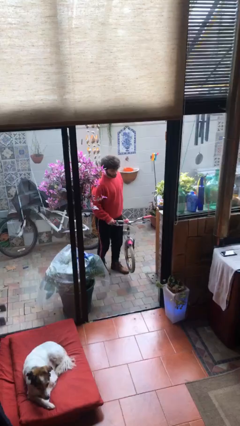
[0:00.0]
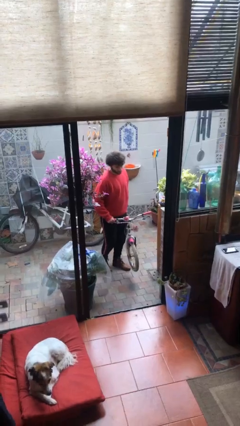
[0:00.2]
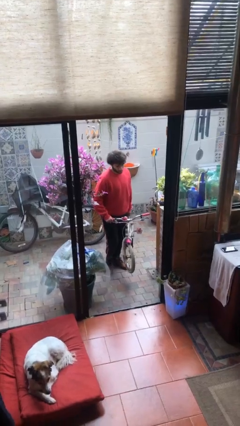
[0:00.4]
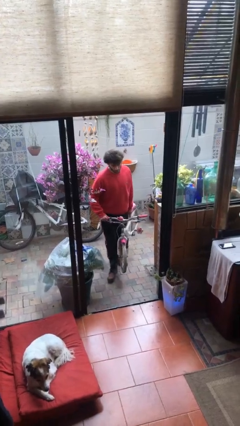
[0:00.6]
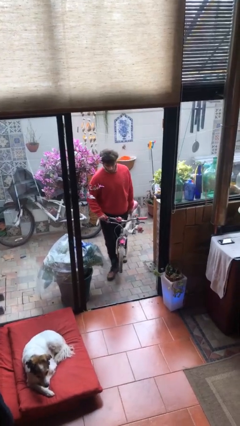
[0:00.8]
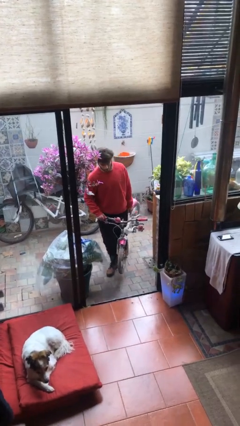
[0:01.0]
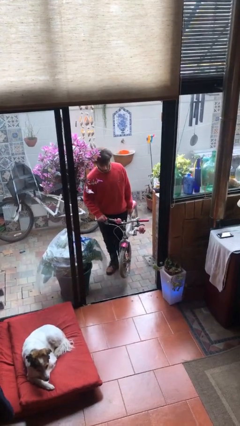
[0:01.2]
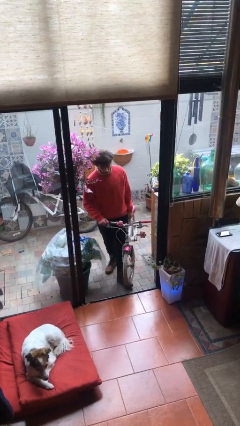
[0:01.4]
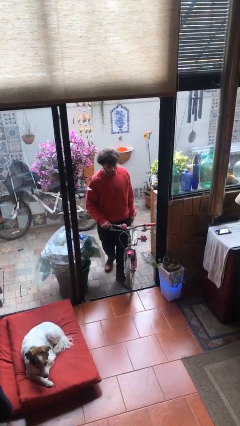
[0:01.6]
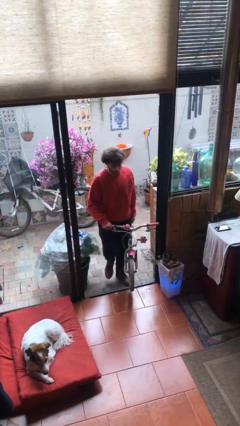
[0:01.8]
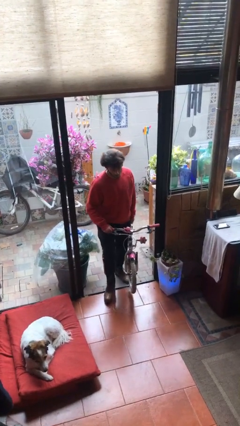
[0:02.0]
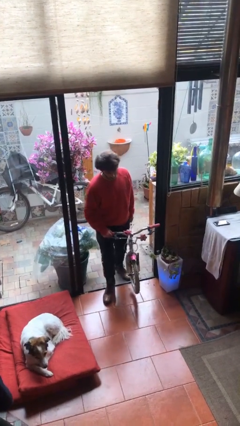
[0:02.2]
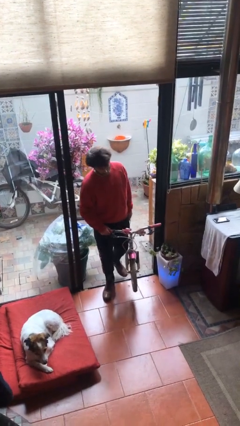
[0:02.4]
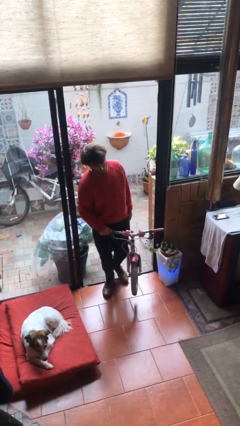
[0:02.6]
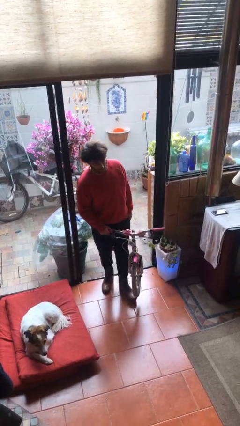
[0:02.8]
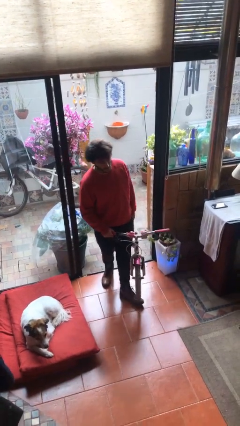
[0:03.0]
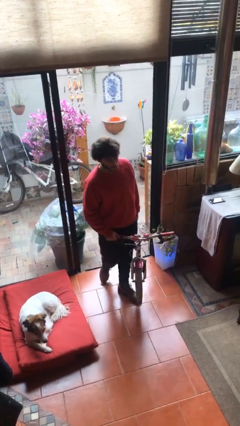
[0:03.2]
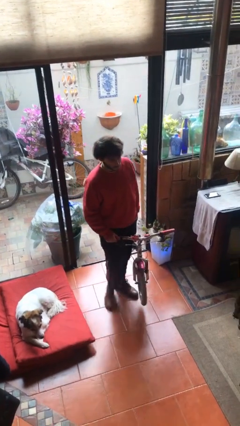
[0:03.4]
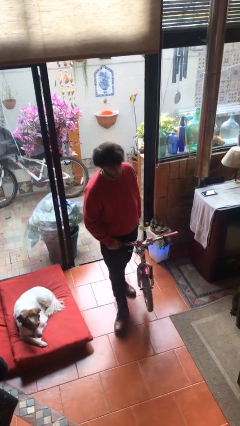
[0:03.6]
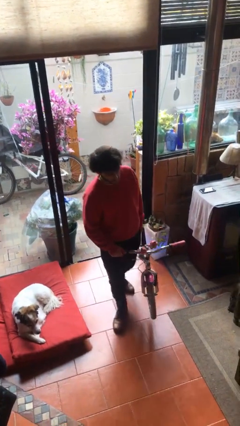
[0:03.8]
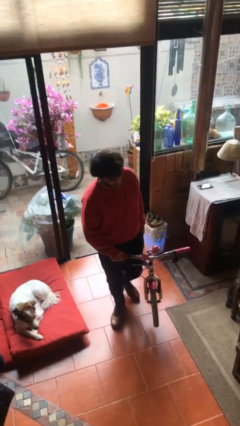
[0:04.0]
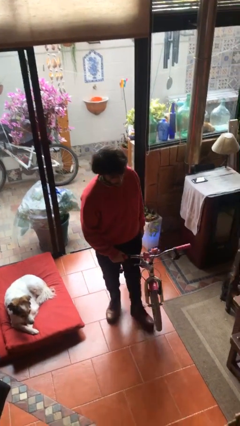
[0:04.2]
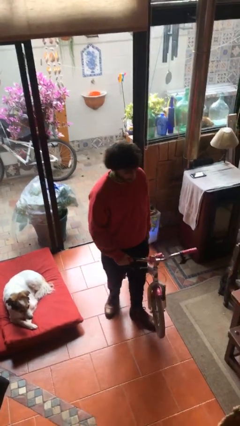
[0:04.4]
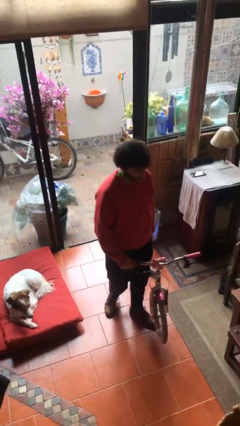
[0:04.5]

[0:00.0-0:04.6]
person carries bicycle

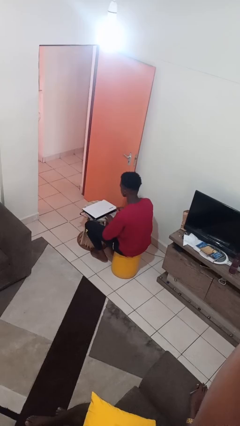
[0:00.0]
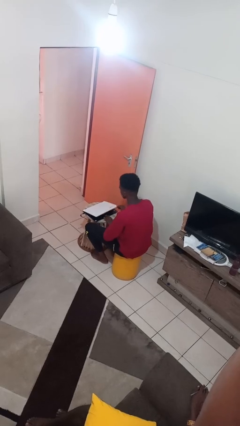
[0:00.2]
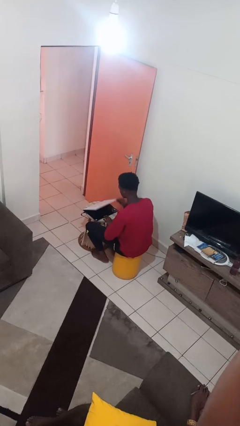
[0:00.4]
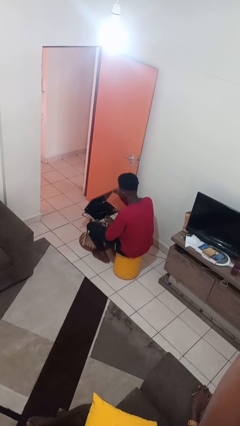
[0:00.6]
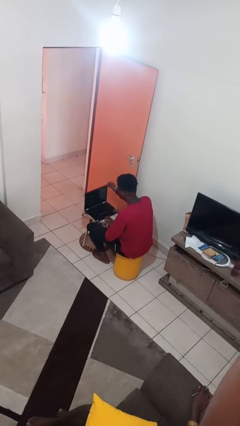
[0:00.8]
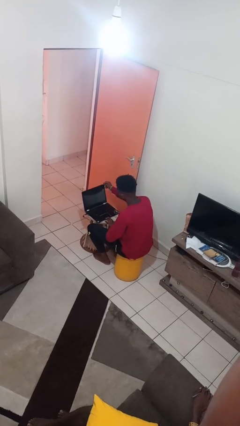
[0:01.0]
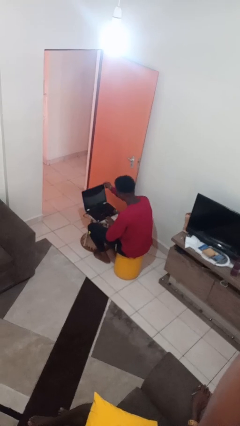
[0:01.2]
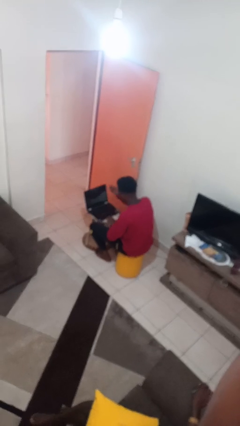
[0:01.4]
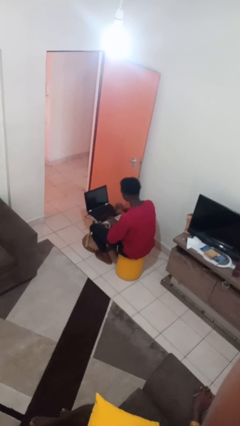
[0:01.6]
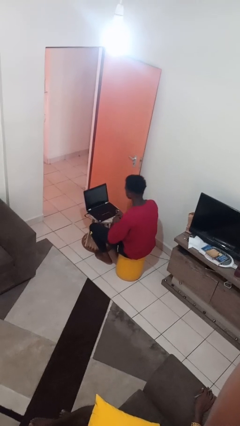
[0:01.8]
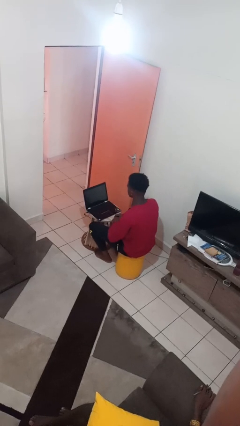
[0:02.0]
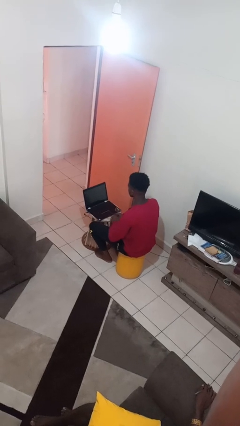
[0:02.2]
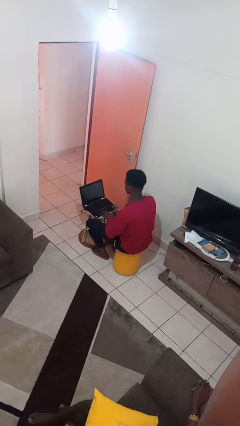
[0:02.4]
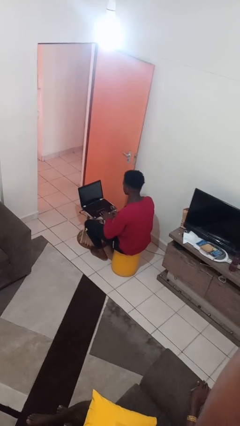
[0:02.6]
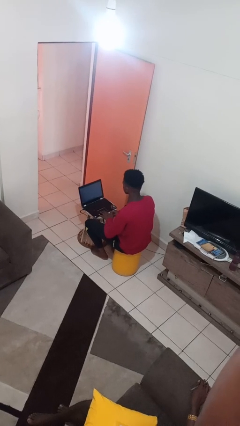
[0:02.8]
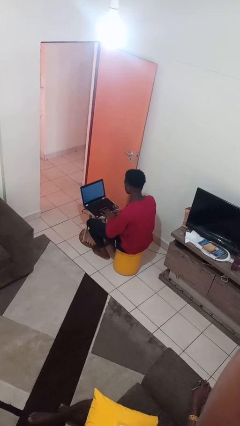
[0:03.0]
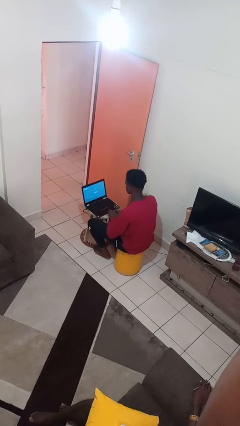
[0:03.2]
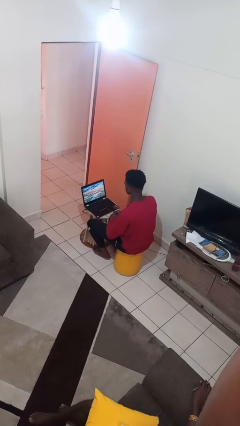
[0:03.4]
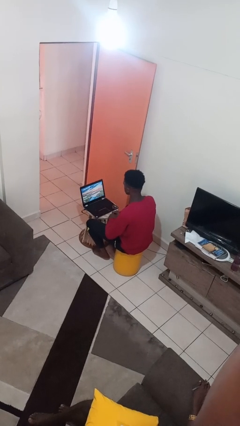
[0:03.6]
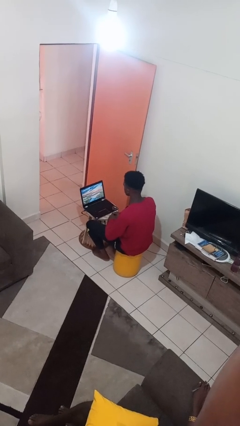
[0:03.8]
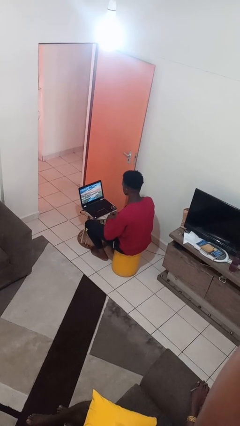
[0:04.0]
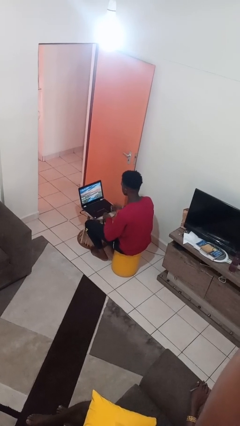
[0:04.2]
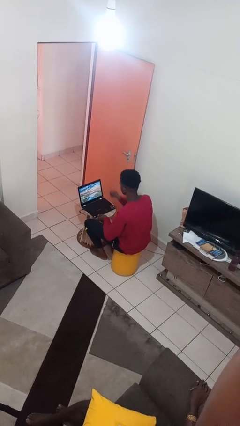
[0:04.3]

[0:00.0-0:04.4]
person opens laptop

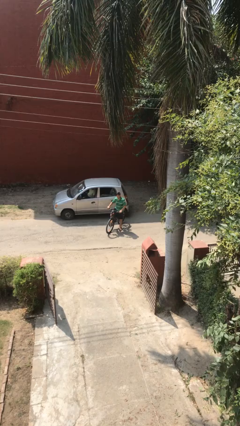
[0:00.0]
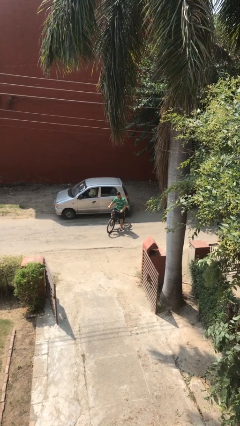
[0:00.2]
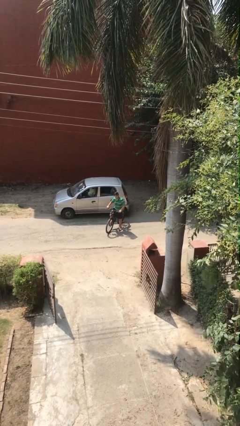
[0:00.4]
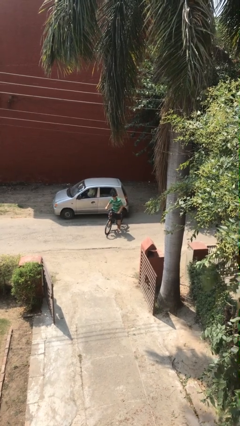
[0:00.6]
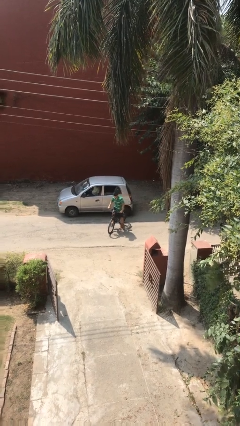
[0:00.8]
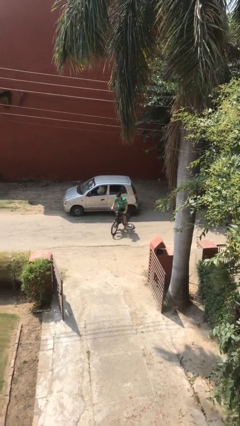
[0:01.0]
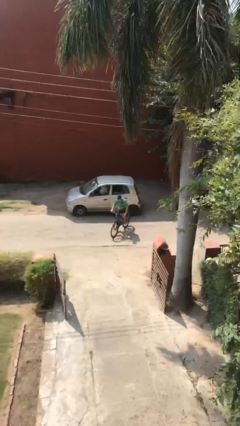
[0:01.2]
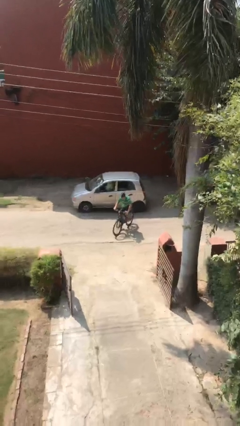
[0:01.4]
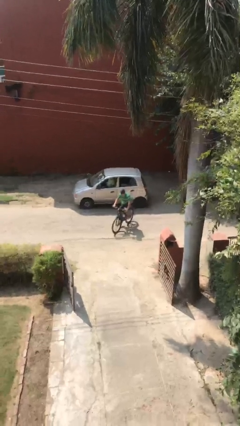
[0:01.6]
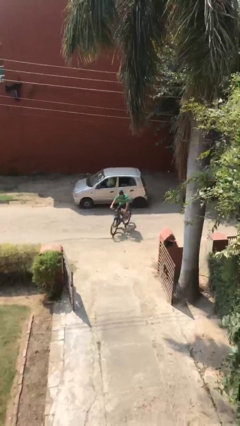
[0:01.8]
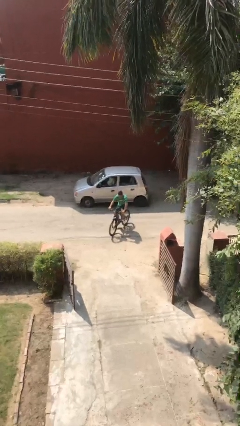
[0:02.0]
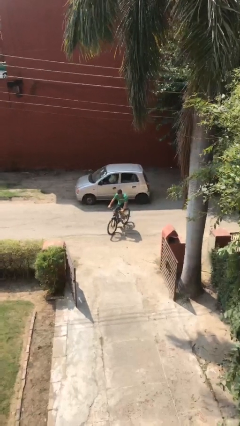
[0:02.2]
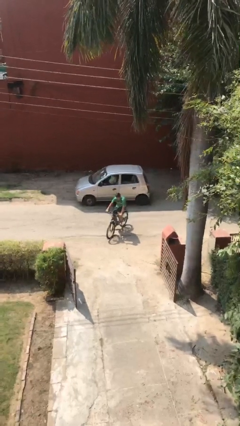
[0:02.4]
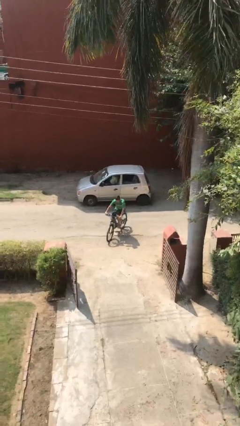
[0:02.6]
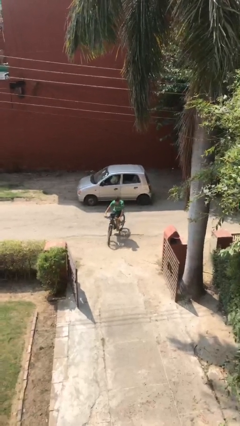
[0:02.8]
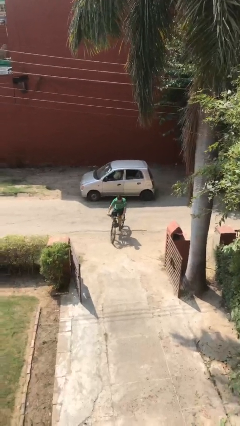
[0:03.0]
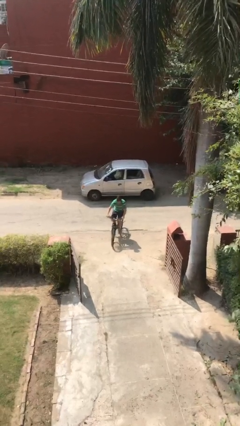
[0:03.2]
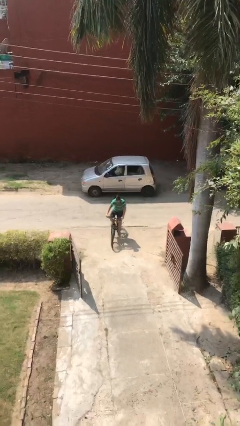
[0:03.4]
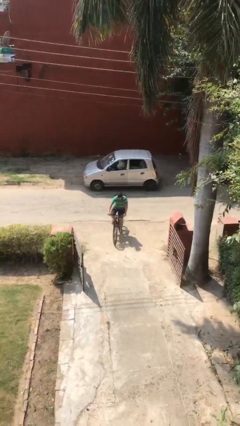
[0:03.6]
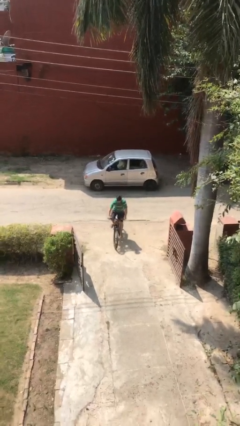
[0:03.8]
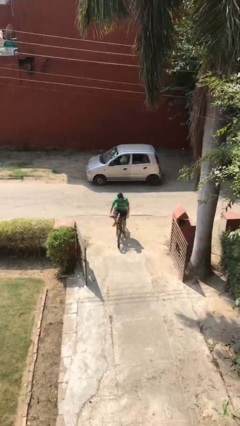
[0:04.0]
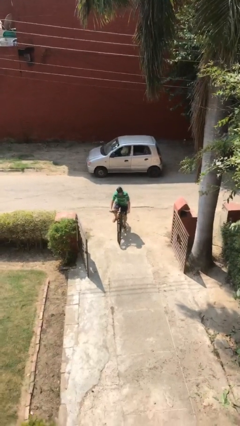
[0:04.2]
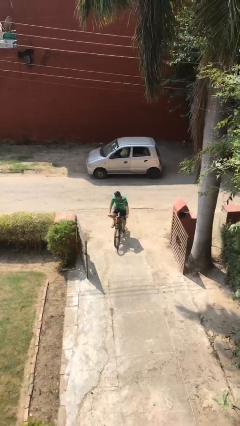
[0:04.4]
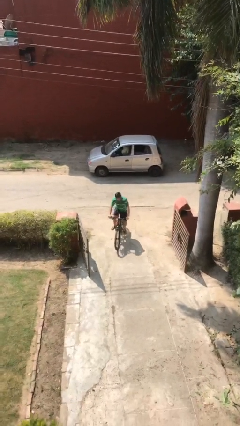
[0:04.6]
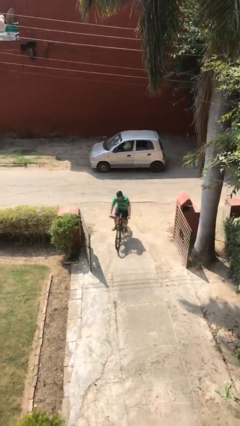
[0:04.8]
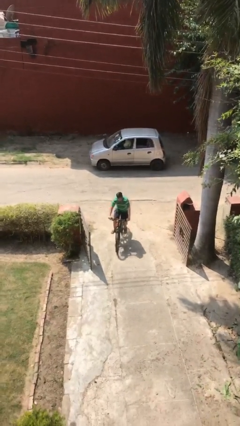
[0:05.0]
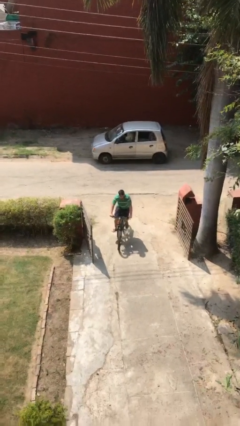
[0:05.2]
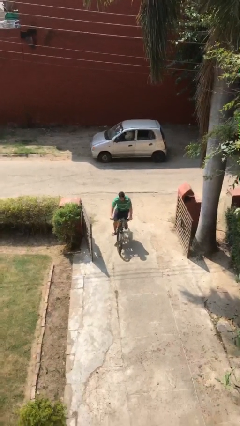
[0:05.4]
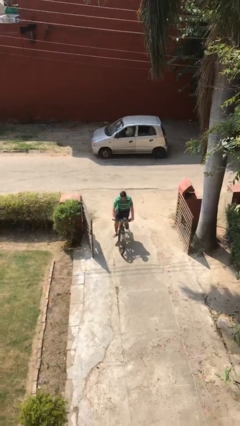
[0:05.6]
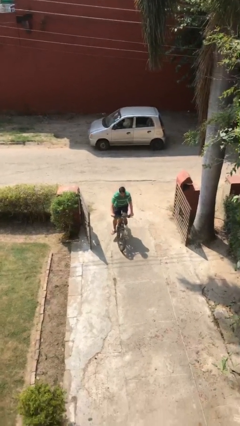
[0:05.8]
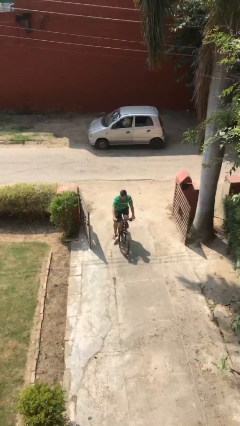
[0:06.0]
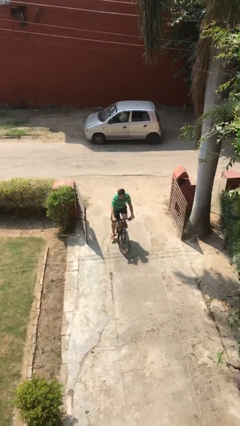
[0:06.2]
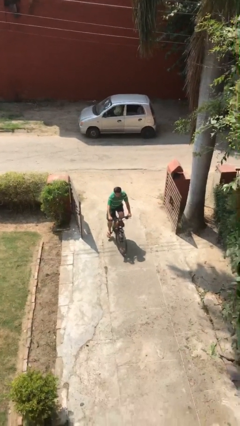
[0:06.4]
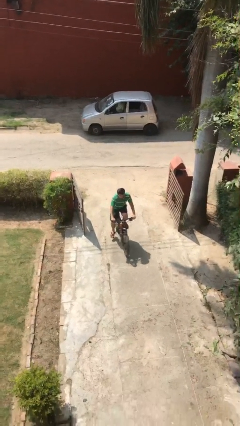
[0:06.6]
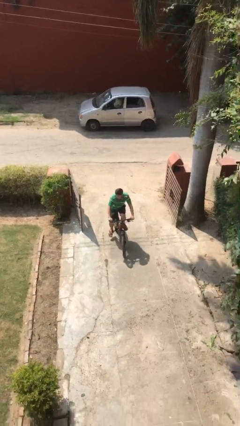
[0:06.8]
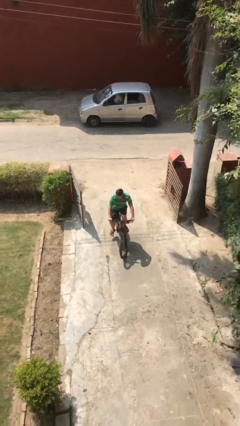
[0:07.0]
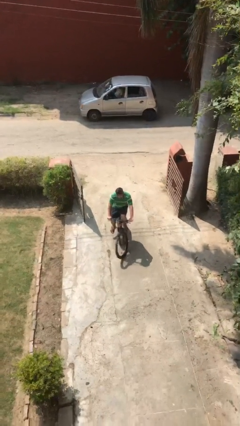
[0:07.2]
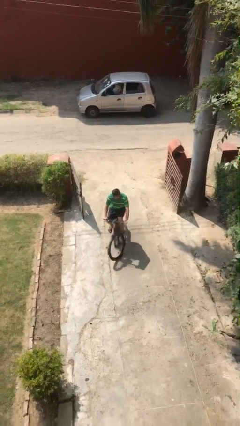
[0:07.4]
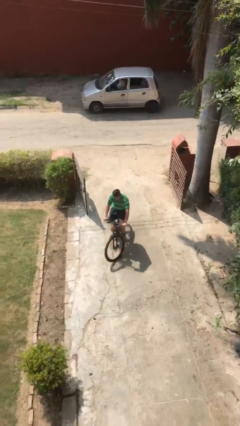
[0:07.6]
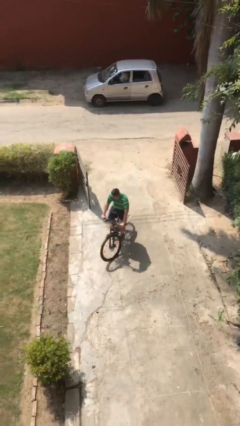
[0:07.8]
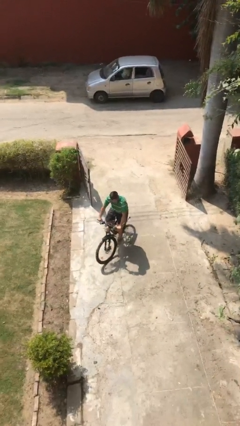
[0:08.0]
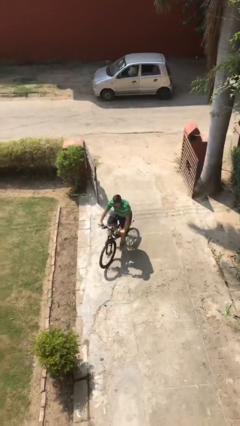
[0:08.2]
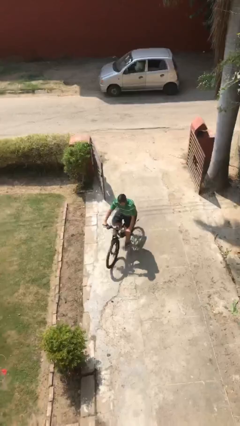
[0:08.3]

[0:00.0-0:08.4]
person rides bicycle
